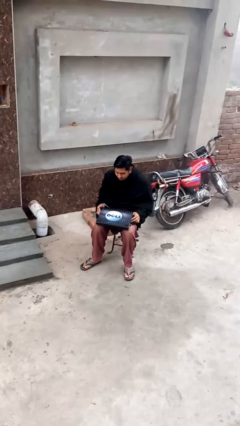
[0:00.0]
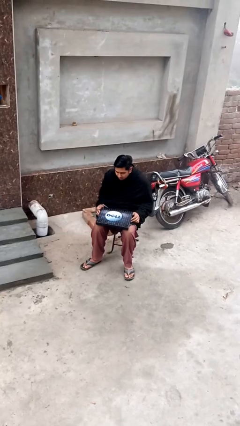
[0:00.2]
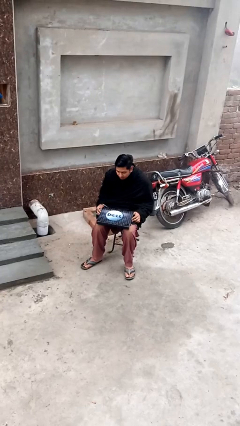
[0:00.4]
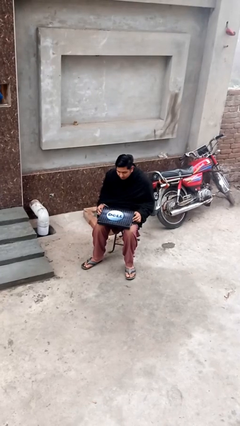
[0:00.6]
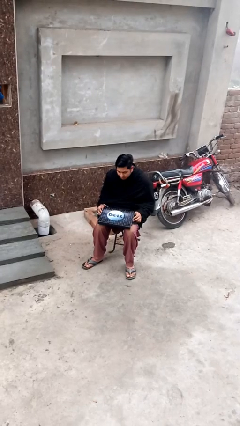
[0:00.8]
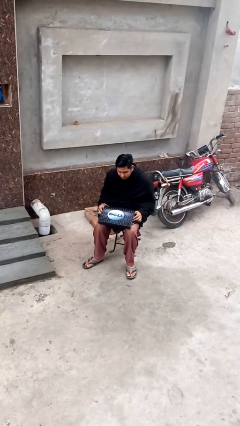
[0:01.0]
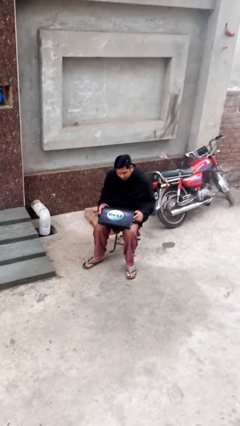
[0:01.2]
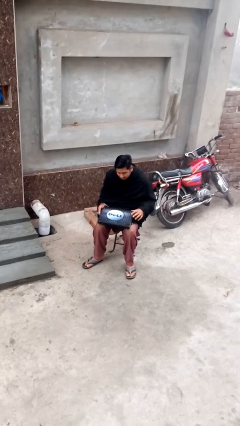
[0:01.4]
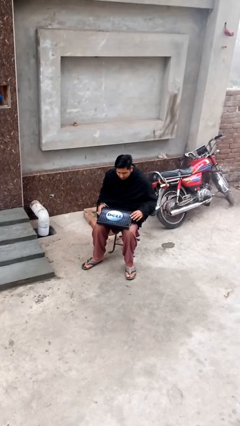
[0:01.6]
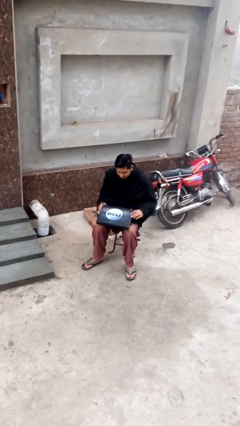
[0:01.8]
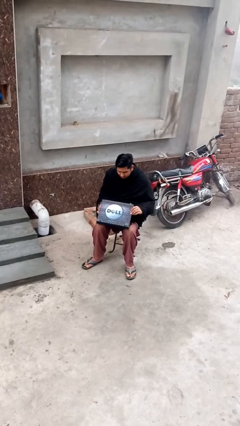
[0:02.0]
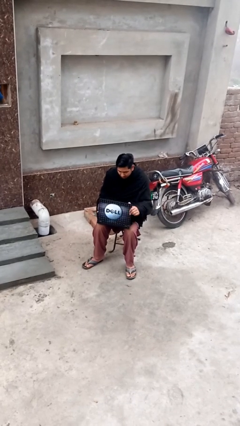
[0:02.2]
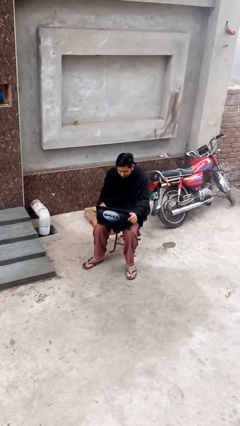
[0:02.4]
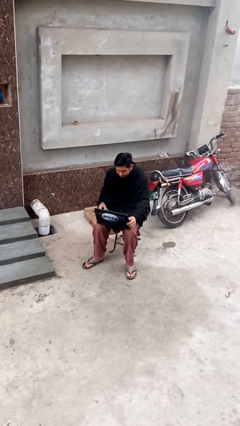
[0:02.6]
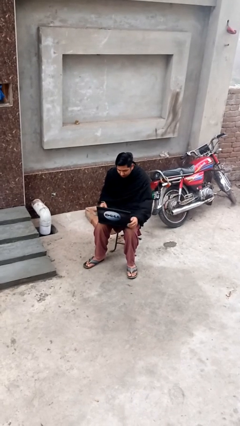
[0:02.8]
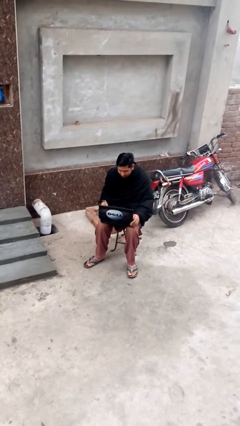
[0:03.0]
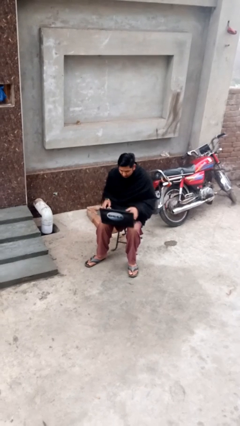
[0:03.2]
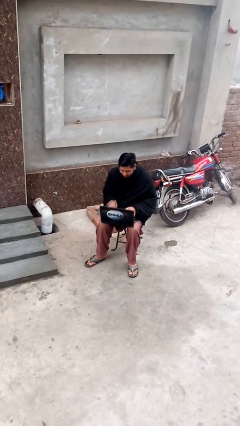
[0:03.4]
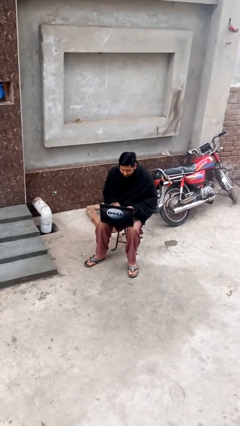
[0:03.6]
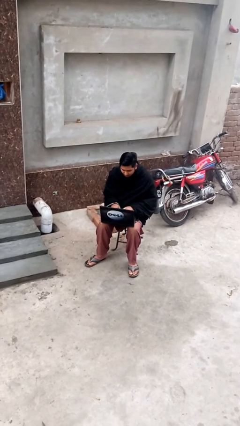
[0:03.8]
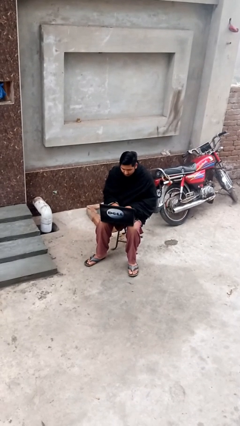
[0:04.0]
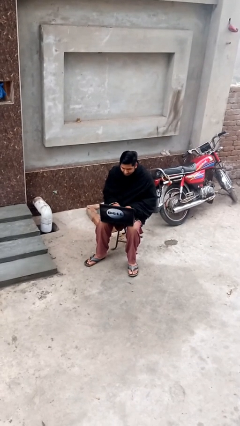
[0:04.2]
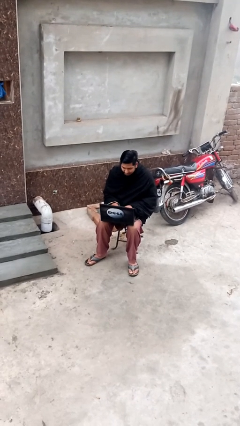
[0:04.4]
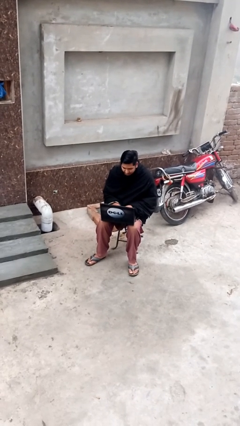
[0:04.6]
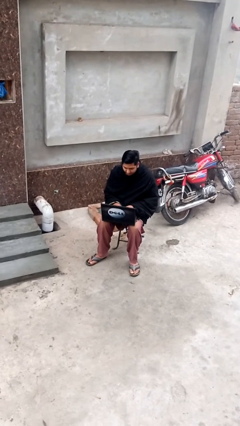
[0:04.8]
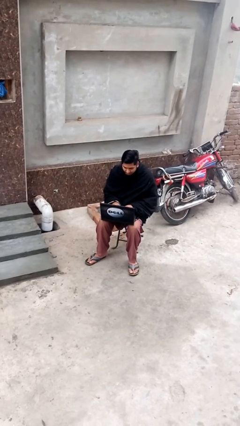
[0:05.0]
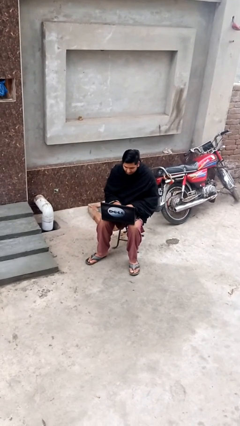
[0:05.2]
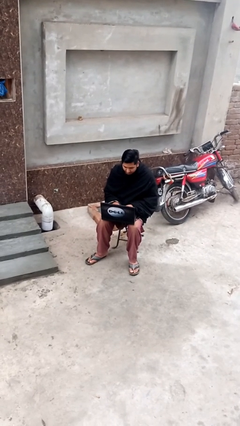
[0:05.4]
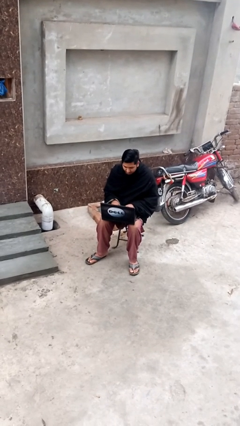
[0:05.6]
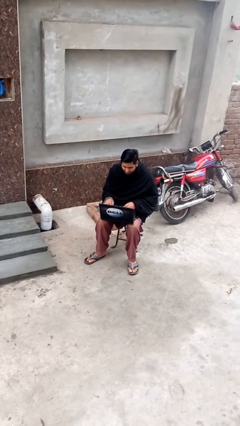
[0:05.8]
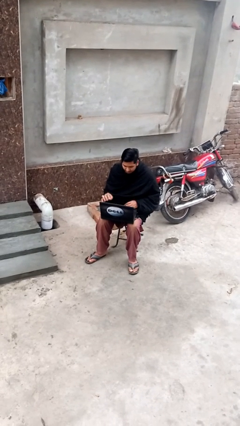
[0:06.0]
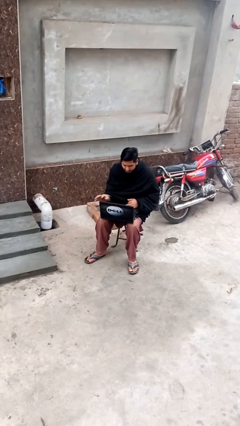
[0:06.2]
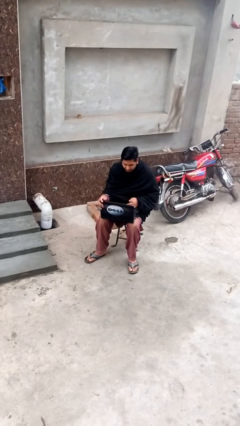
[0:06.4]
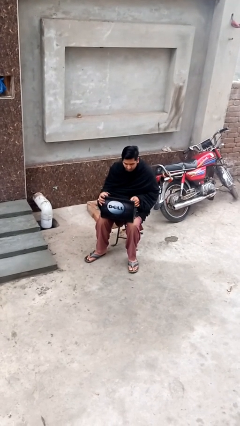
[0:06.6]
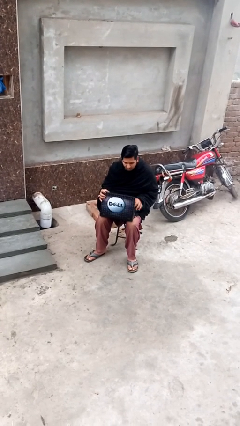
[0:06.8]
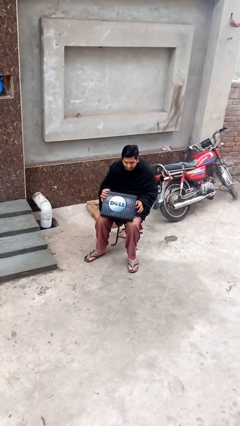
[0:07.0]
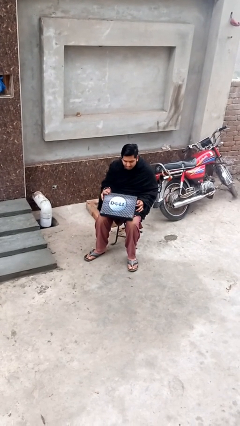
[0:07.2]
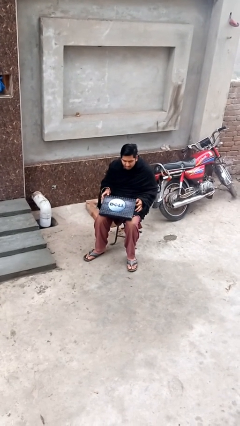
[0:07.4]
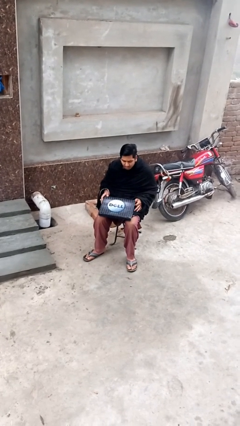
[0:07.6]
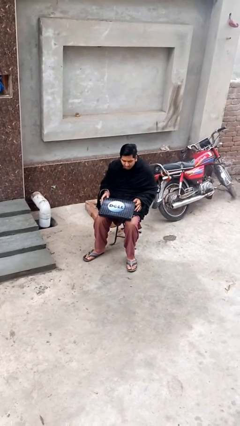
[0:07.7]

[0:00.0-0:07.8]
person interacts with laptop

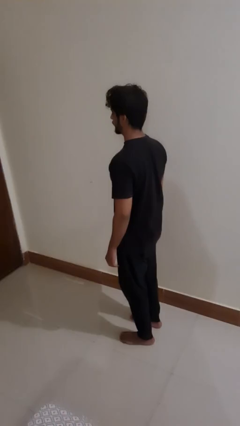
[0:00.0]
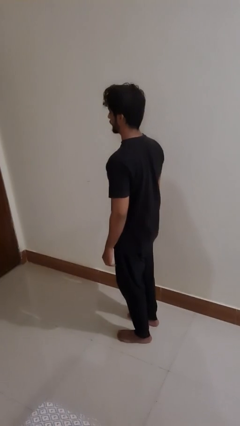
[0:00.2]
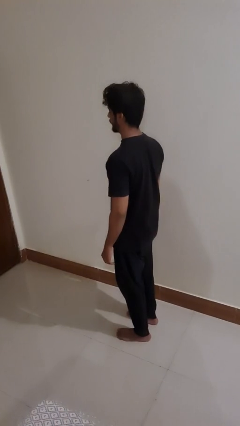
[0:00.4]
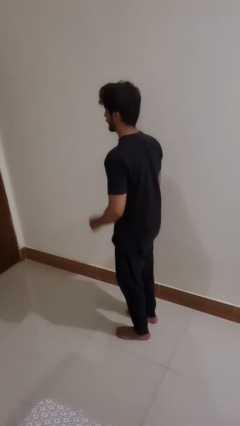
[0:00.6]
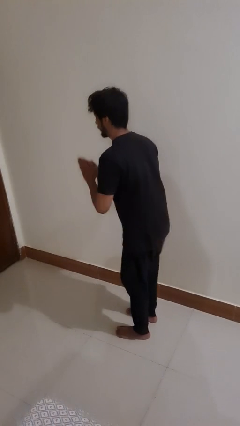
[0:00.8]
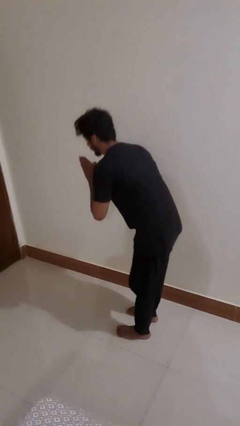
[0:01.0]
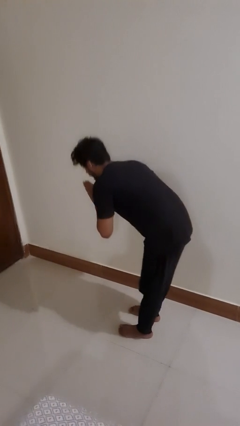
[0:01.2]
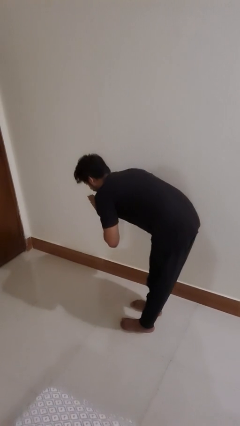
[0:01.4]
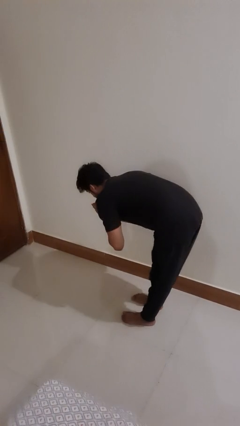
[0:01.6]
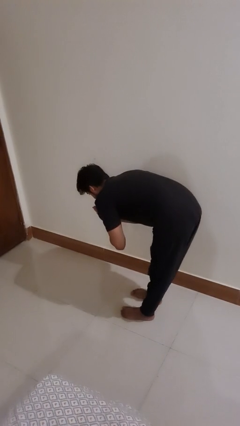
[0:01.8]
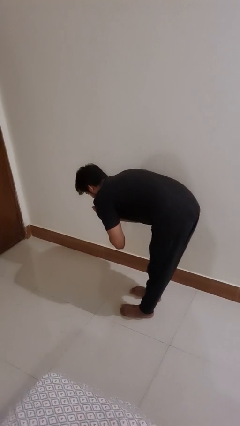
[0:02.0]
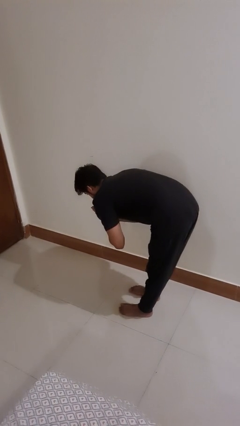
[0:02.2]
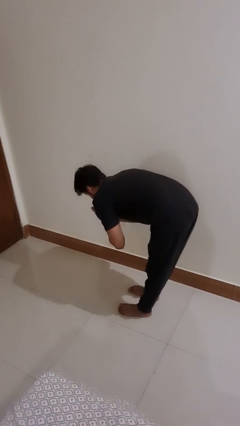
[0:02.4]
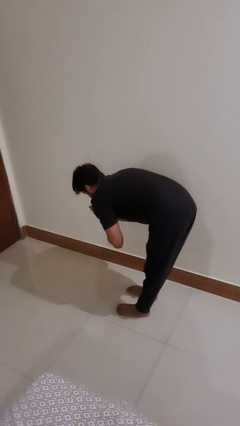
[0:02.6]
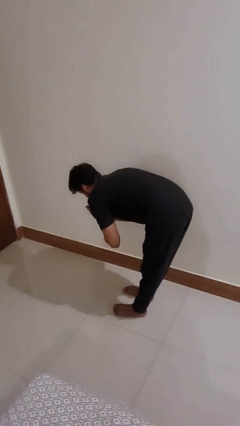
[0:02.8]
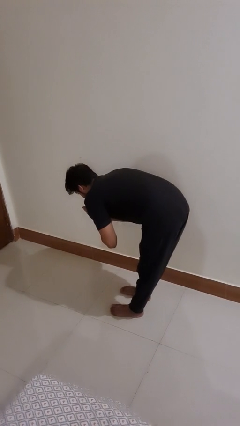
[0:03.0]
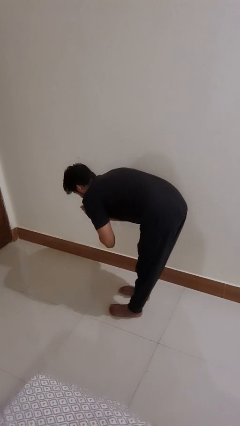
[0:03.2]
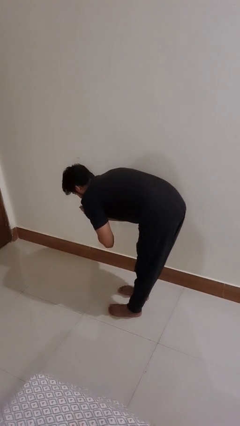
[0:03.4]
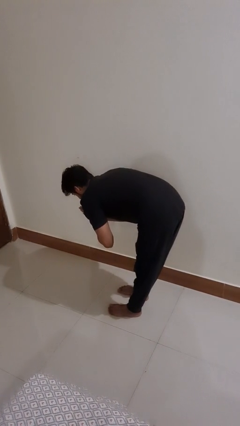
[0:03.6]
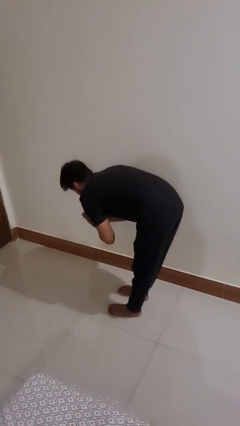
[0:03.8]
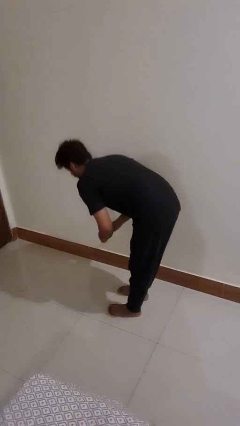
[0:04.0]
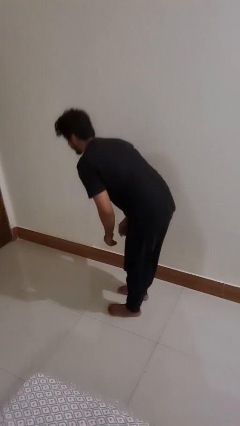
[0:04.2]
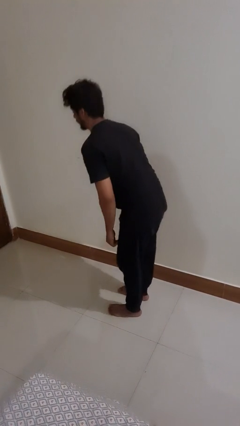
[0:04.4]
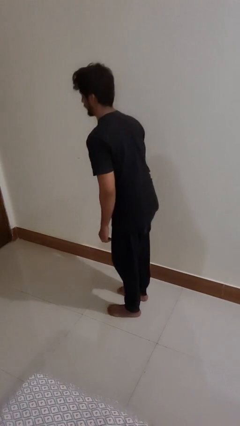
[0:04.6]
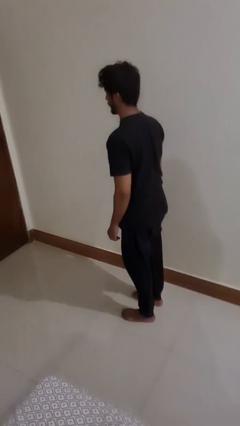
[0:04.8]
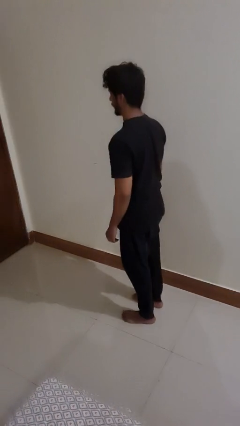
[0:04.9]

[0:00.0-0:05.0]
person bows

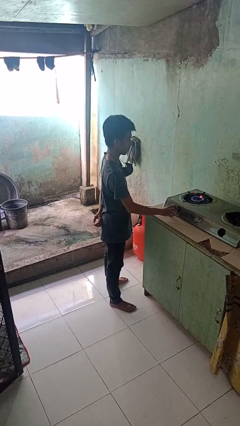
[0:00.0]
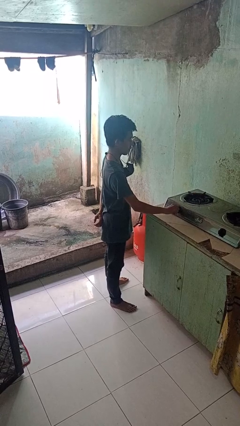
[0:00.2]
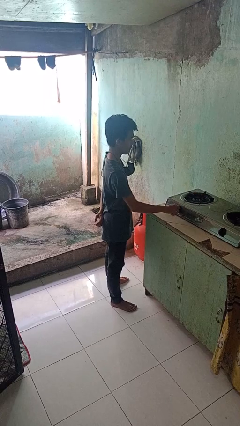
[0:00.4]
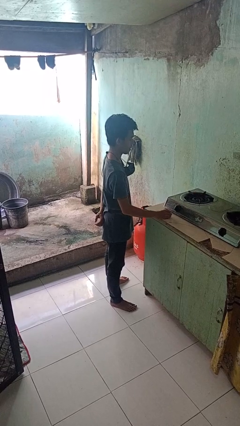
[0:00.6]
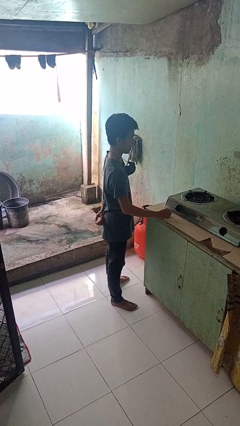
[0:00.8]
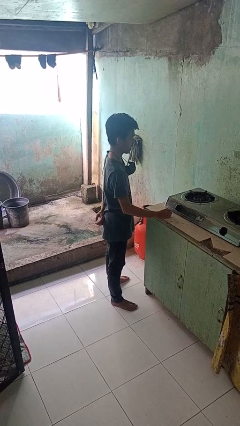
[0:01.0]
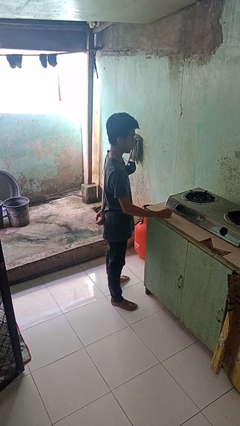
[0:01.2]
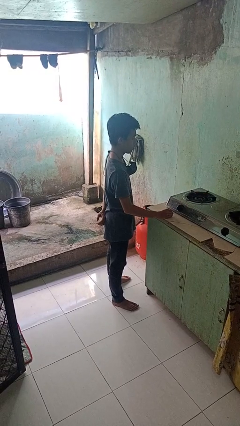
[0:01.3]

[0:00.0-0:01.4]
person turns off stovetop

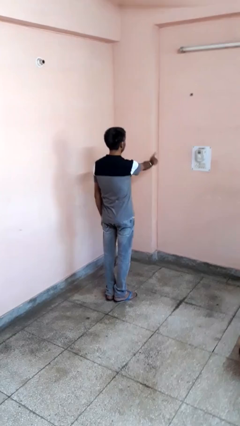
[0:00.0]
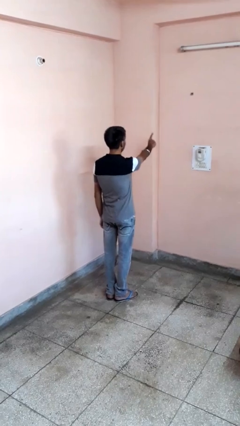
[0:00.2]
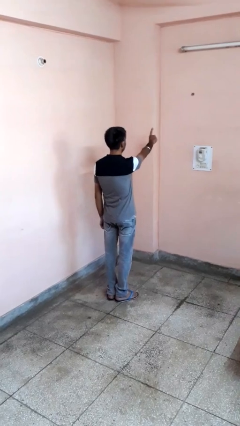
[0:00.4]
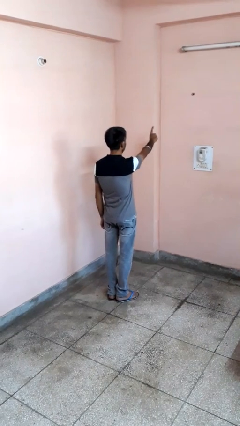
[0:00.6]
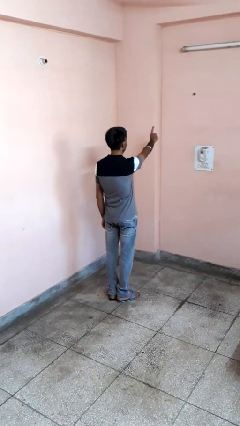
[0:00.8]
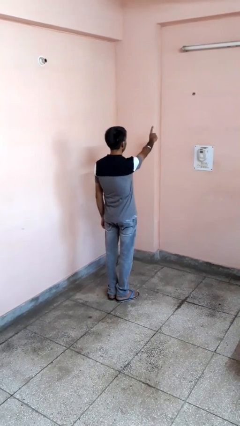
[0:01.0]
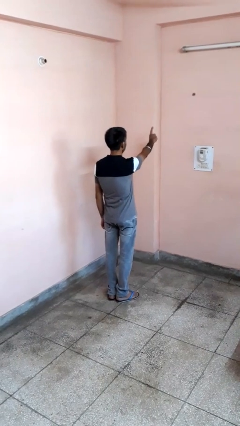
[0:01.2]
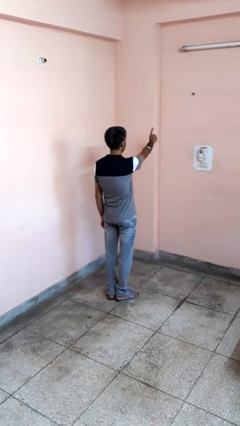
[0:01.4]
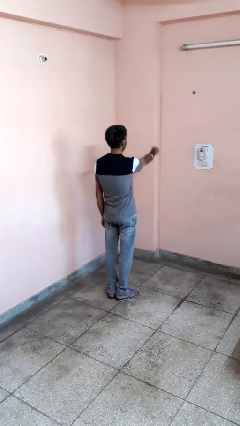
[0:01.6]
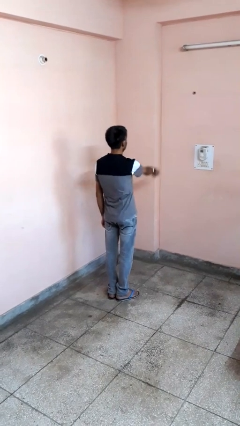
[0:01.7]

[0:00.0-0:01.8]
person gestures number one

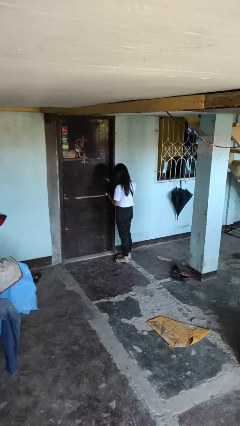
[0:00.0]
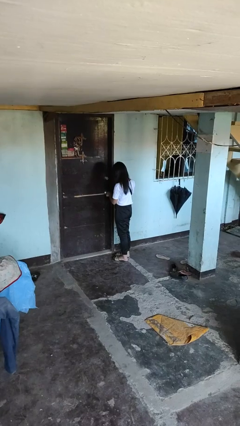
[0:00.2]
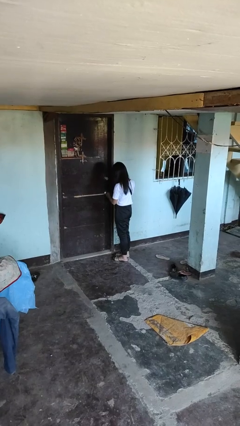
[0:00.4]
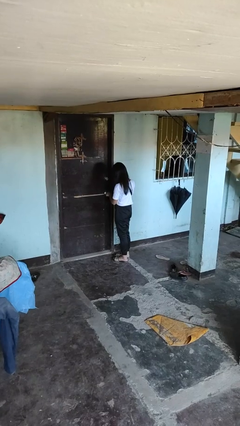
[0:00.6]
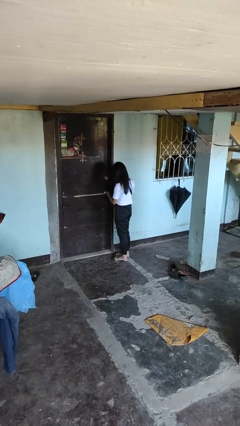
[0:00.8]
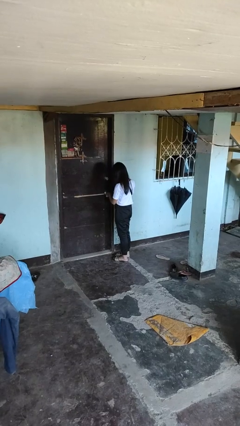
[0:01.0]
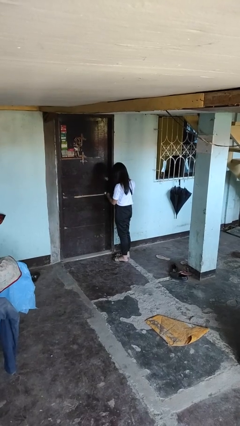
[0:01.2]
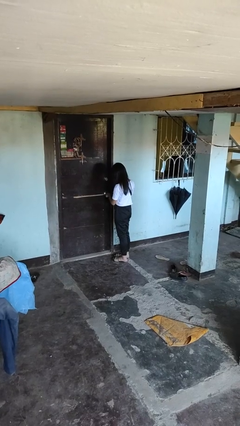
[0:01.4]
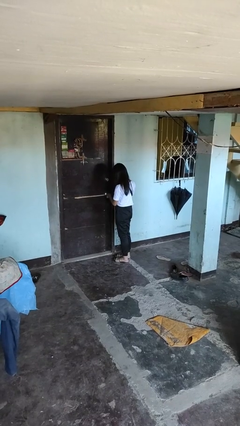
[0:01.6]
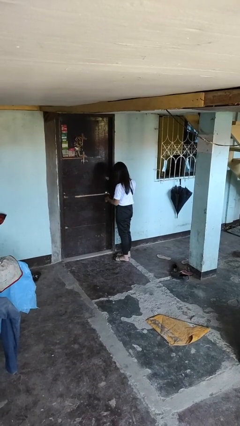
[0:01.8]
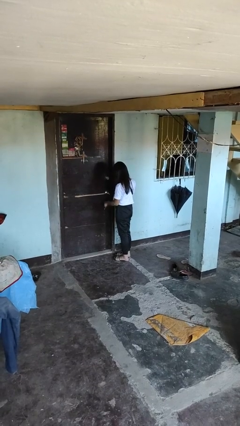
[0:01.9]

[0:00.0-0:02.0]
person locks door with keys
